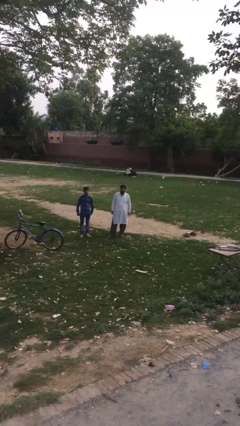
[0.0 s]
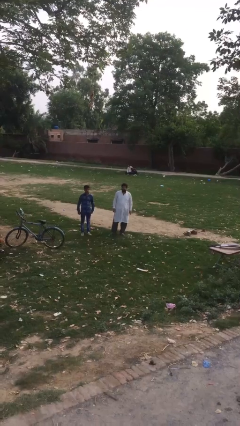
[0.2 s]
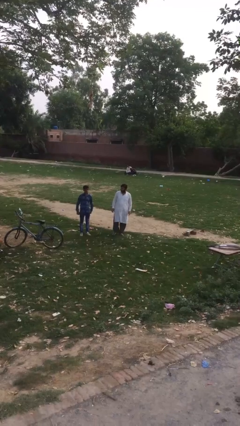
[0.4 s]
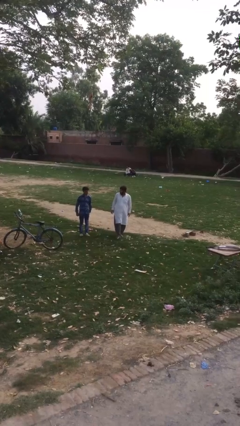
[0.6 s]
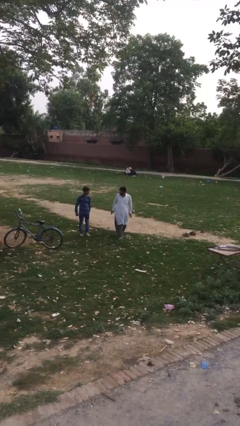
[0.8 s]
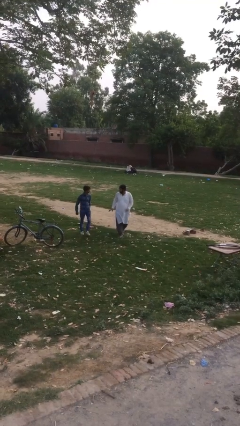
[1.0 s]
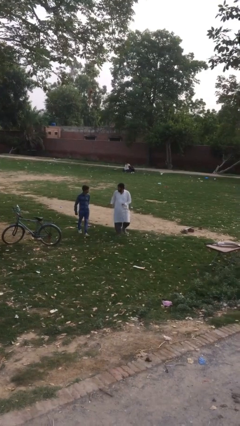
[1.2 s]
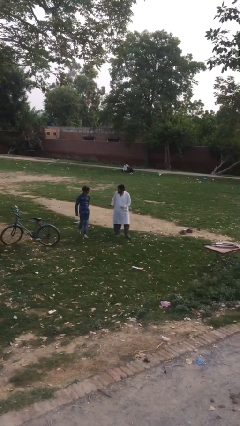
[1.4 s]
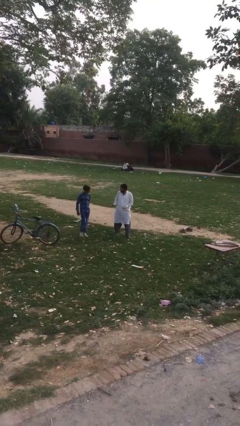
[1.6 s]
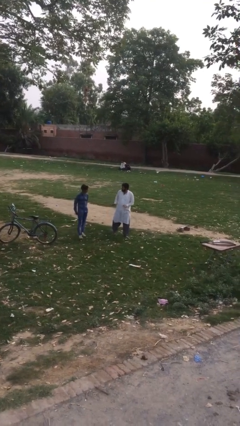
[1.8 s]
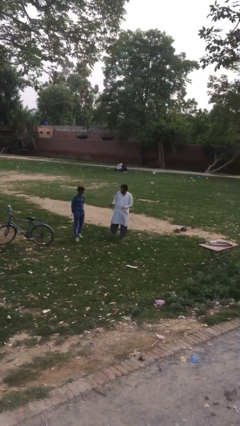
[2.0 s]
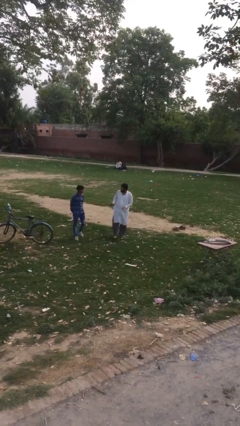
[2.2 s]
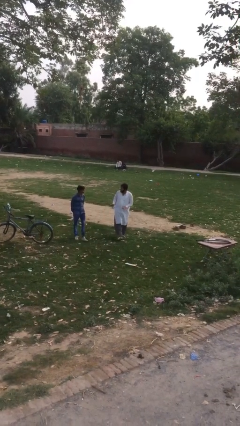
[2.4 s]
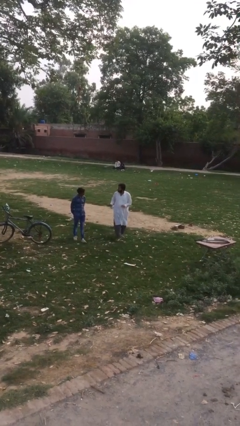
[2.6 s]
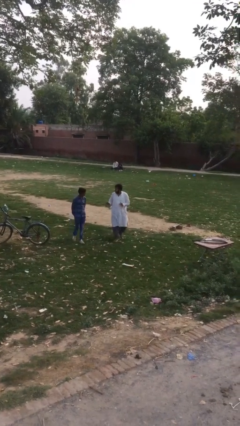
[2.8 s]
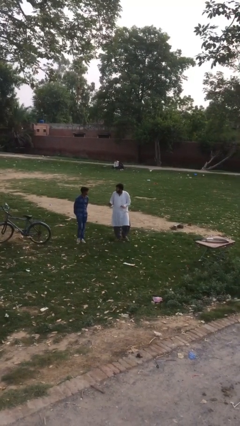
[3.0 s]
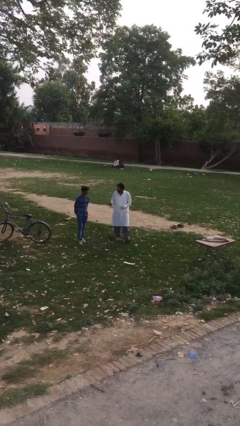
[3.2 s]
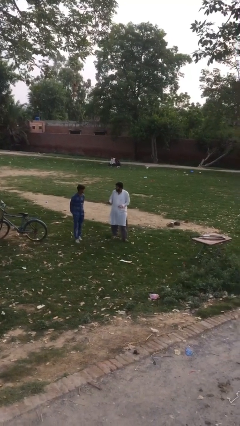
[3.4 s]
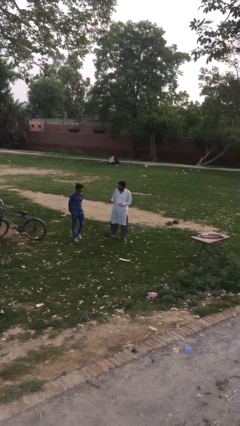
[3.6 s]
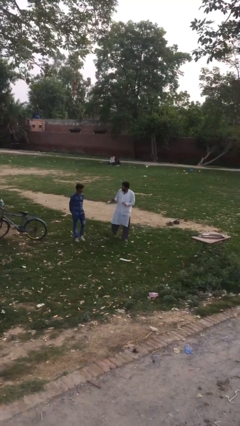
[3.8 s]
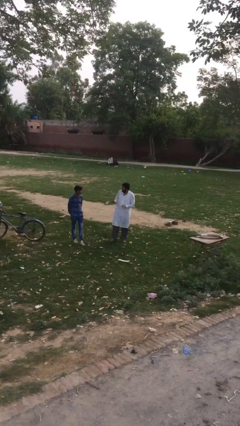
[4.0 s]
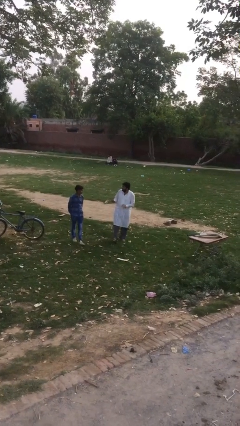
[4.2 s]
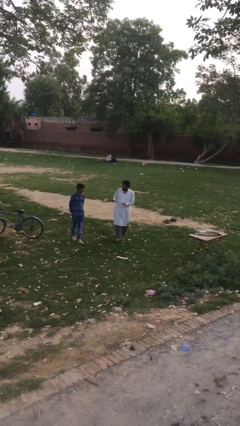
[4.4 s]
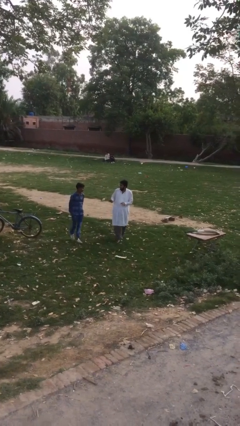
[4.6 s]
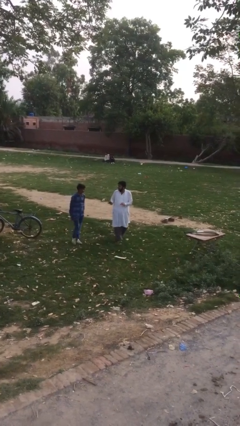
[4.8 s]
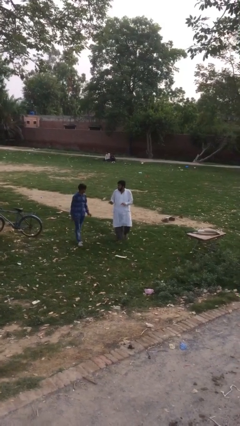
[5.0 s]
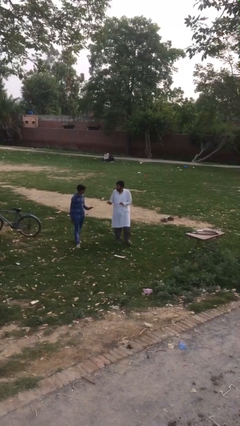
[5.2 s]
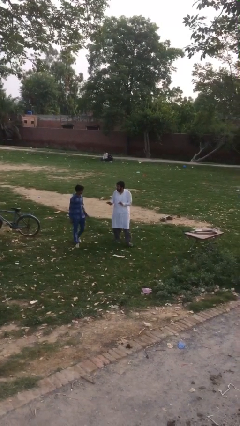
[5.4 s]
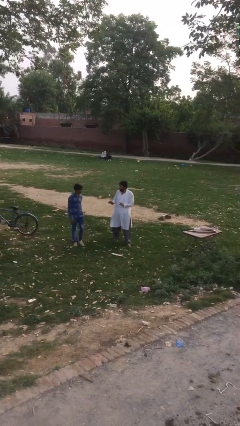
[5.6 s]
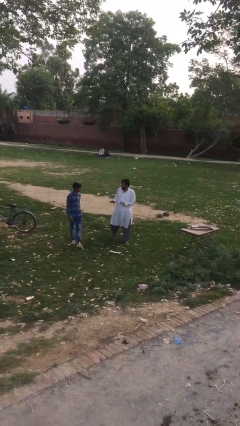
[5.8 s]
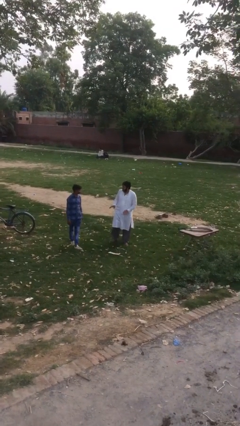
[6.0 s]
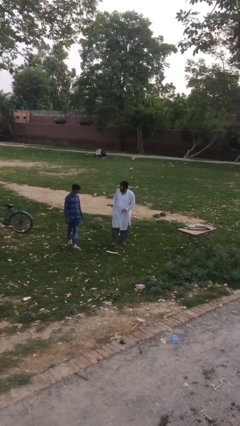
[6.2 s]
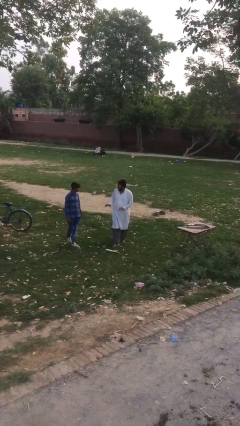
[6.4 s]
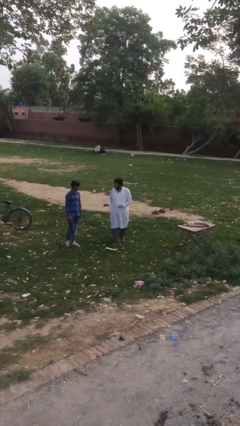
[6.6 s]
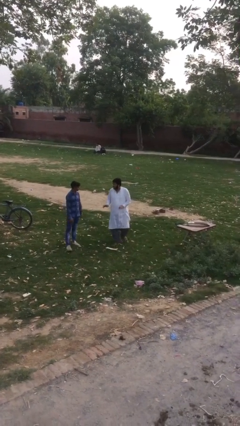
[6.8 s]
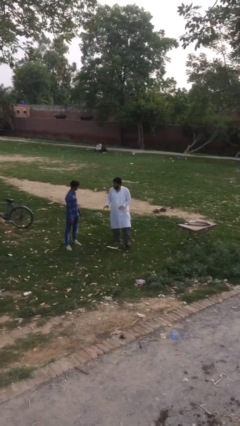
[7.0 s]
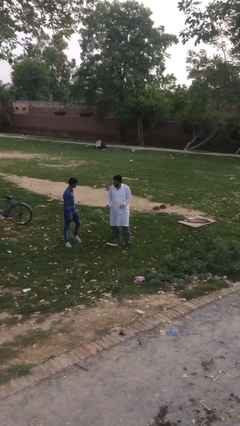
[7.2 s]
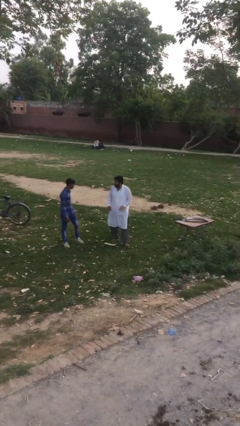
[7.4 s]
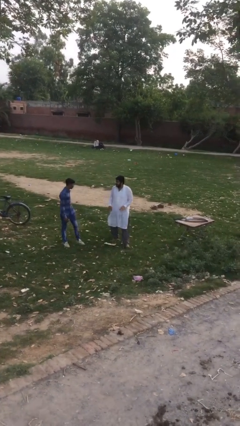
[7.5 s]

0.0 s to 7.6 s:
person talks to person

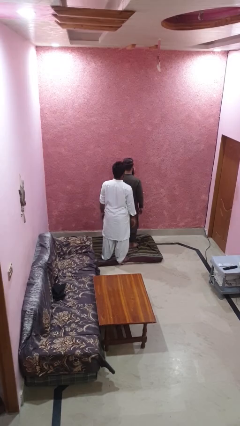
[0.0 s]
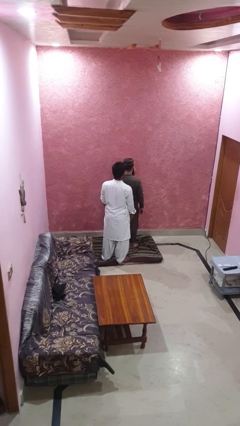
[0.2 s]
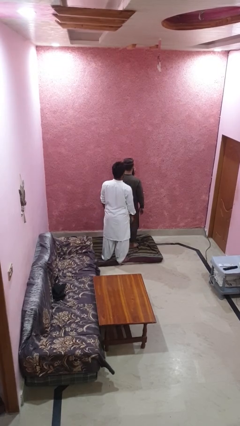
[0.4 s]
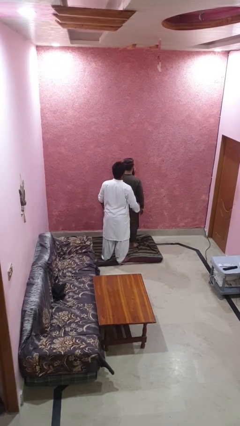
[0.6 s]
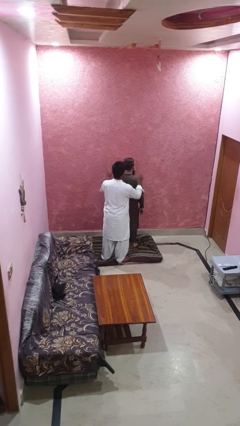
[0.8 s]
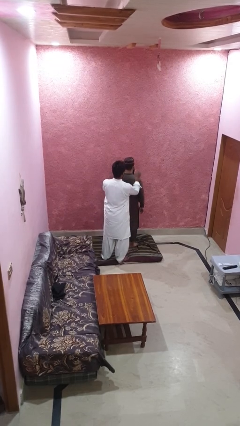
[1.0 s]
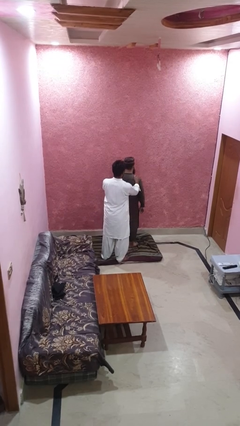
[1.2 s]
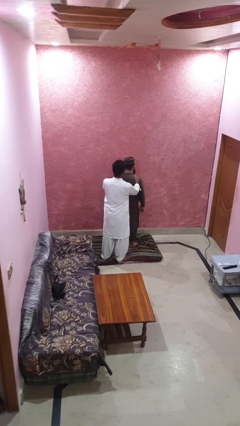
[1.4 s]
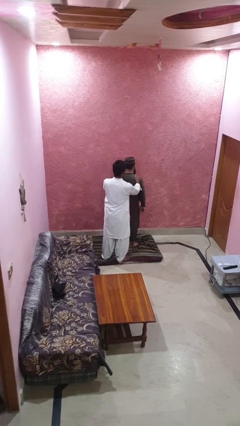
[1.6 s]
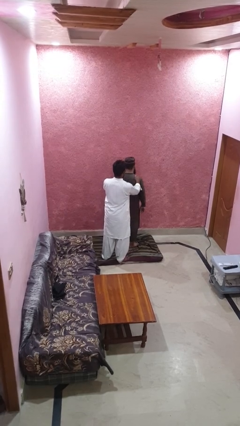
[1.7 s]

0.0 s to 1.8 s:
person grabs person by shoulder

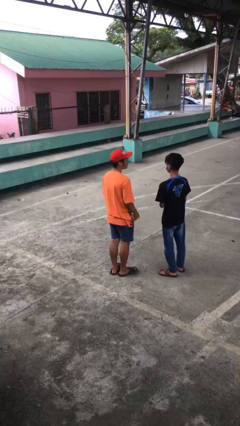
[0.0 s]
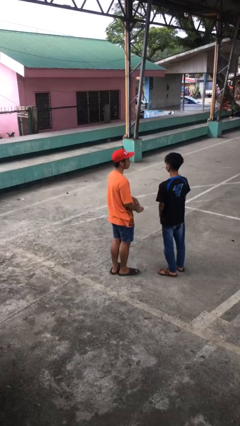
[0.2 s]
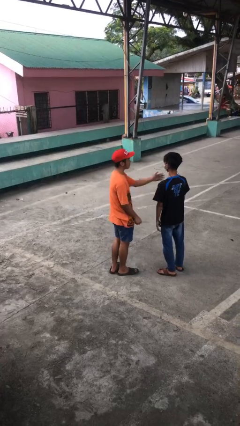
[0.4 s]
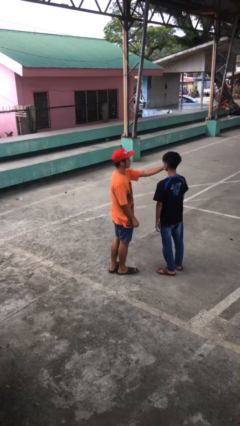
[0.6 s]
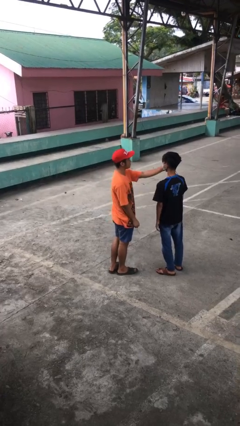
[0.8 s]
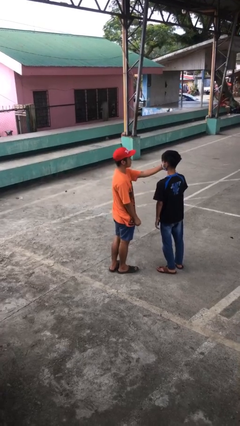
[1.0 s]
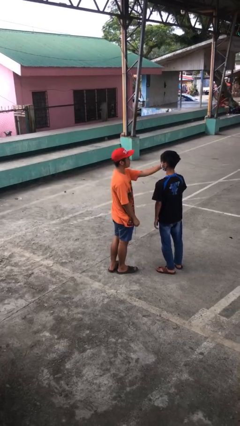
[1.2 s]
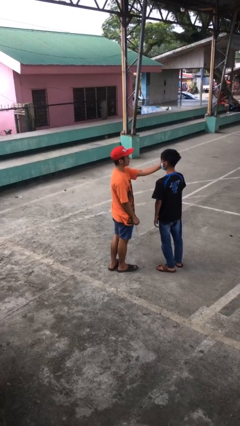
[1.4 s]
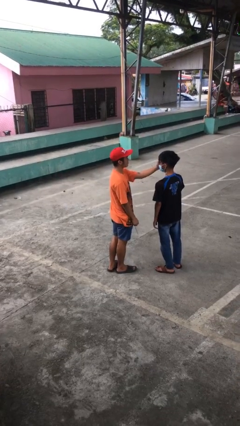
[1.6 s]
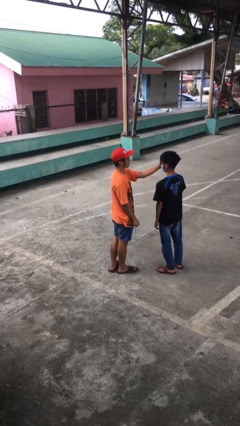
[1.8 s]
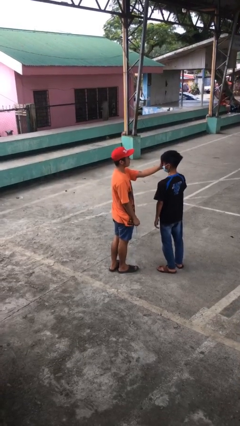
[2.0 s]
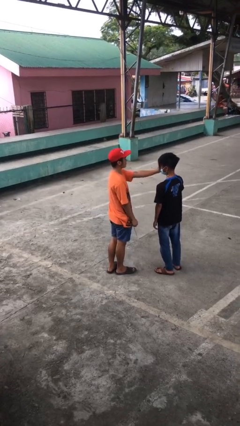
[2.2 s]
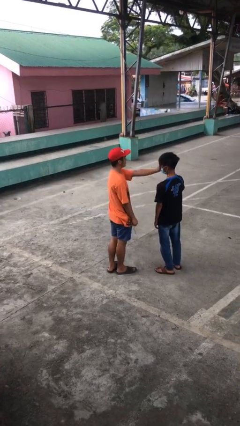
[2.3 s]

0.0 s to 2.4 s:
person touches face of person

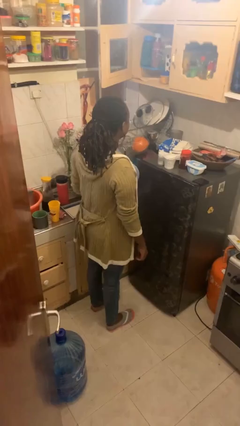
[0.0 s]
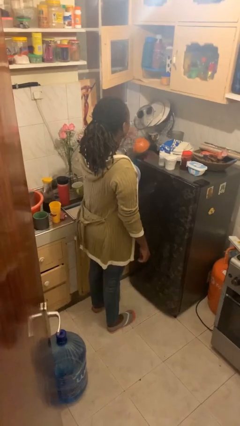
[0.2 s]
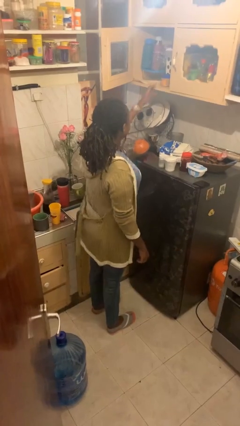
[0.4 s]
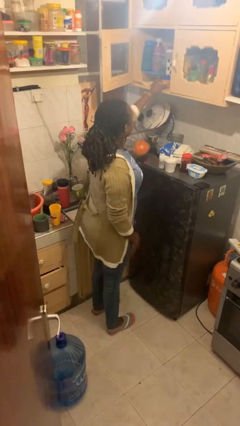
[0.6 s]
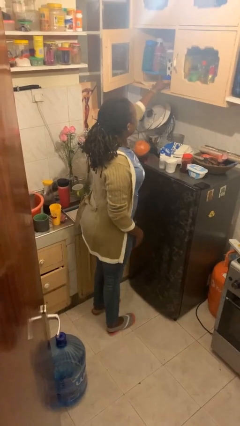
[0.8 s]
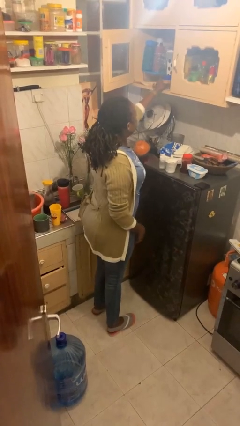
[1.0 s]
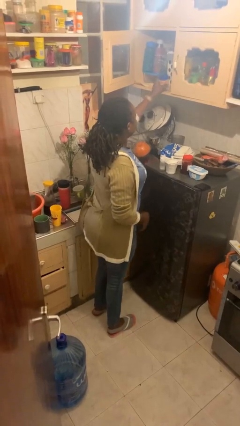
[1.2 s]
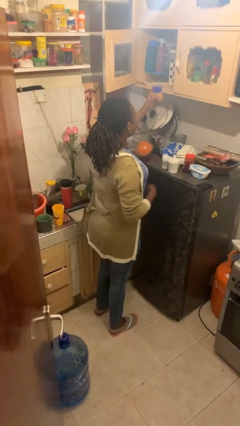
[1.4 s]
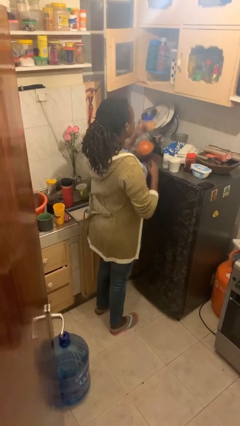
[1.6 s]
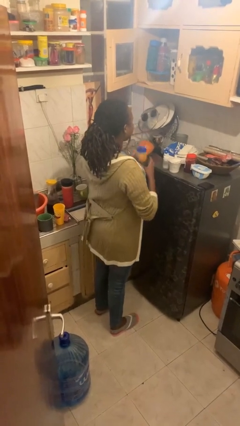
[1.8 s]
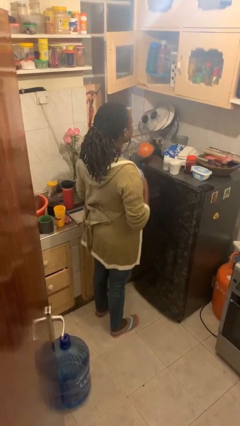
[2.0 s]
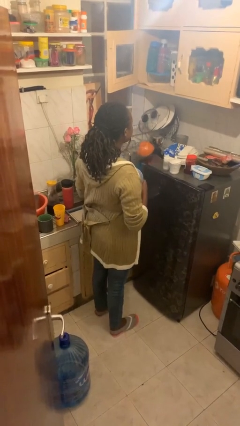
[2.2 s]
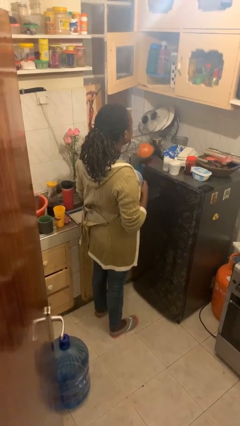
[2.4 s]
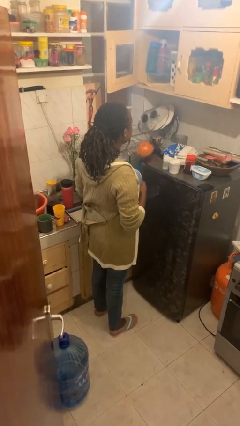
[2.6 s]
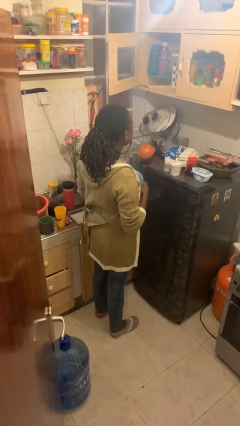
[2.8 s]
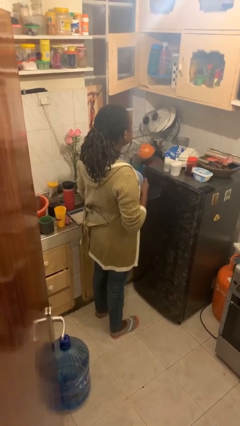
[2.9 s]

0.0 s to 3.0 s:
person picks up object from countertop

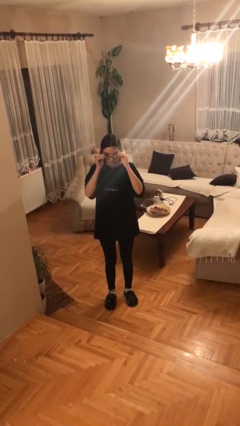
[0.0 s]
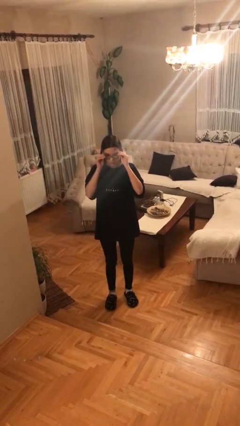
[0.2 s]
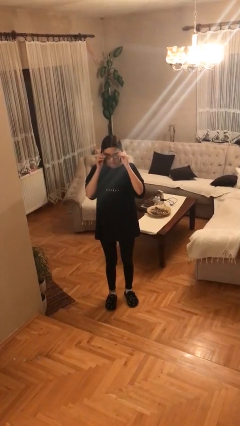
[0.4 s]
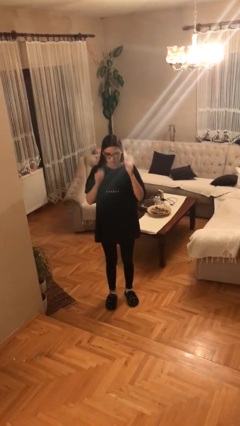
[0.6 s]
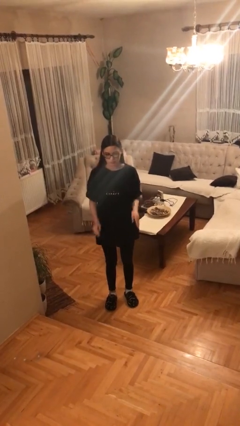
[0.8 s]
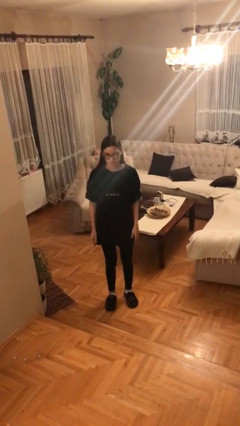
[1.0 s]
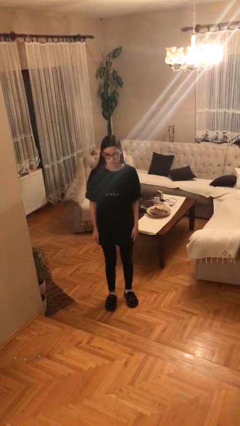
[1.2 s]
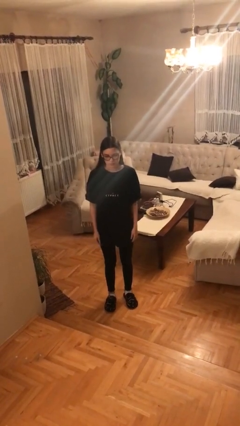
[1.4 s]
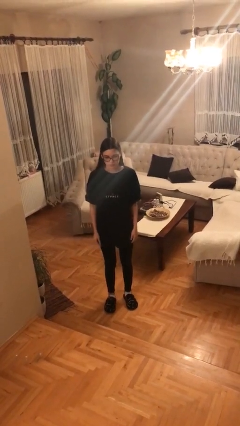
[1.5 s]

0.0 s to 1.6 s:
person puts on glasses

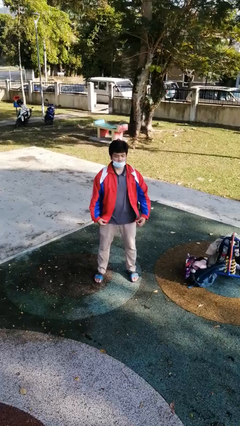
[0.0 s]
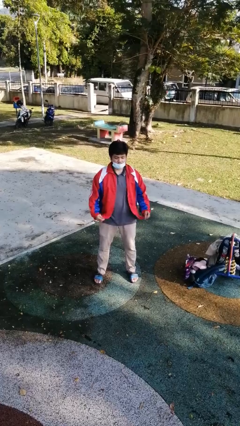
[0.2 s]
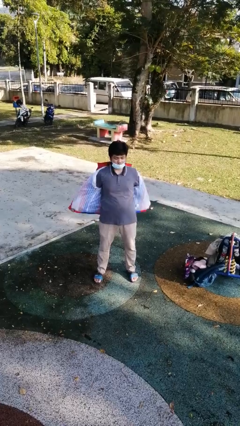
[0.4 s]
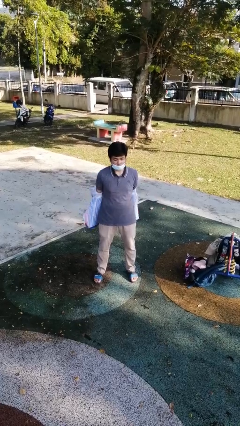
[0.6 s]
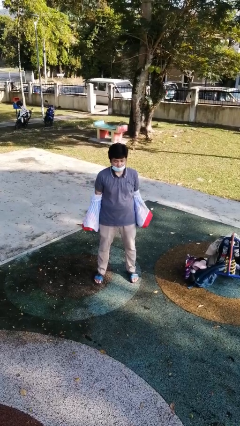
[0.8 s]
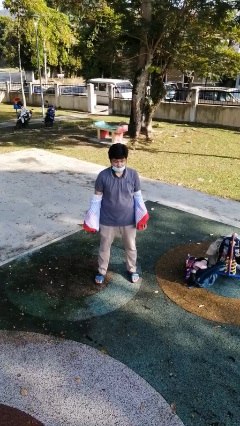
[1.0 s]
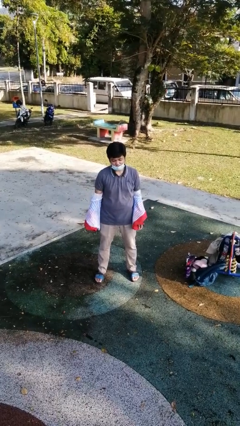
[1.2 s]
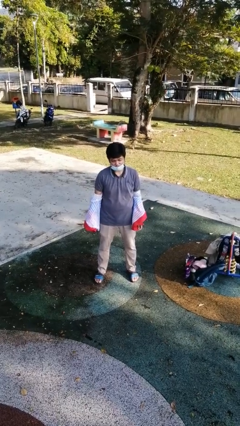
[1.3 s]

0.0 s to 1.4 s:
person takes off jacket
